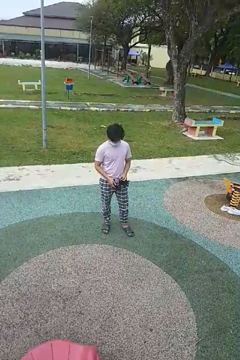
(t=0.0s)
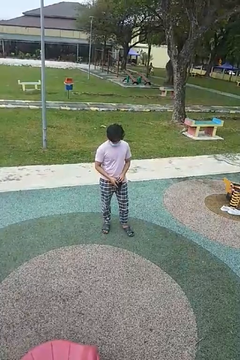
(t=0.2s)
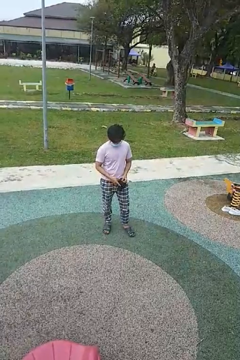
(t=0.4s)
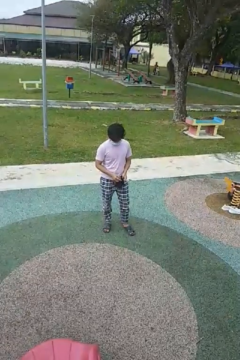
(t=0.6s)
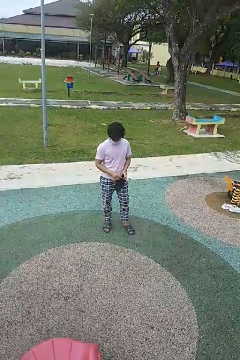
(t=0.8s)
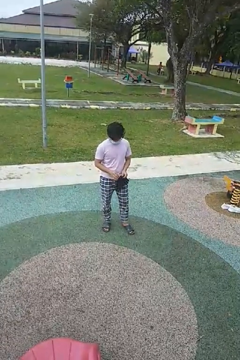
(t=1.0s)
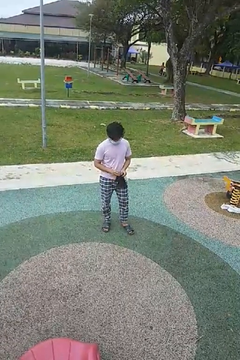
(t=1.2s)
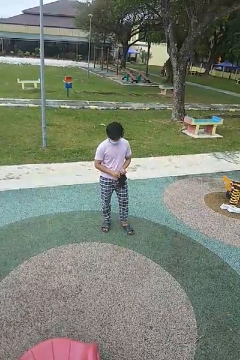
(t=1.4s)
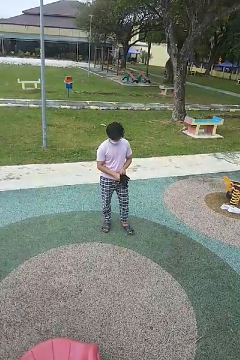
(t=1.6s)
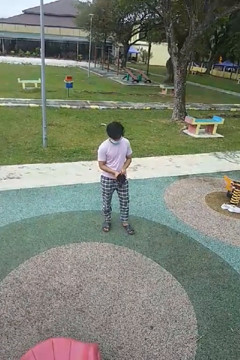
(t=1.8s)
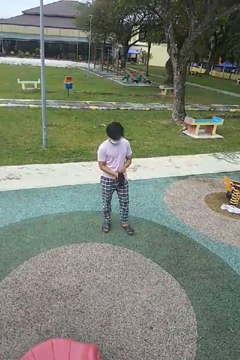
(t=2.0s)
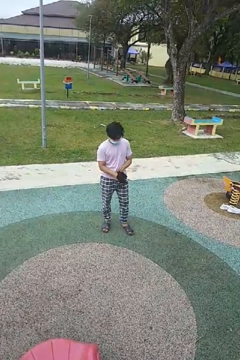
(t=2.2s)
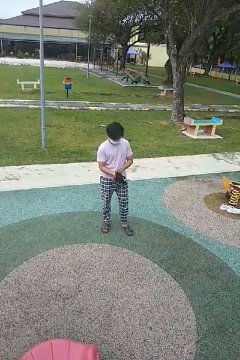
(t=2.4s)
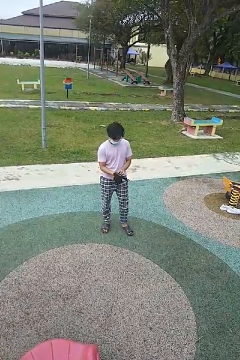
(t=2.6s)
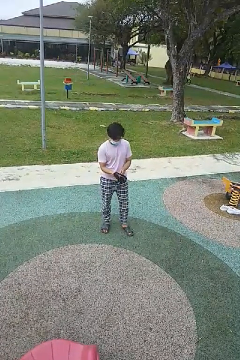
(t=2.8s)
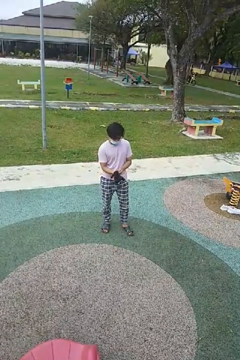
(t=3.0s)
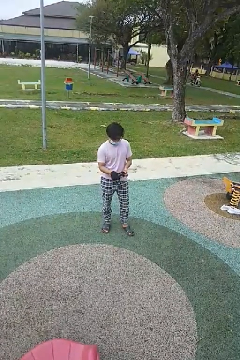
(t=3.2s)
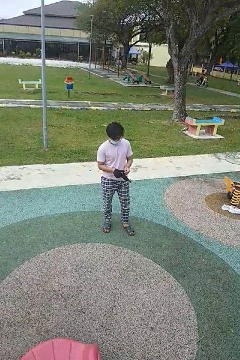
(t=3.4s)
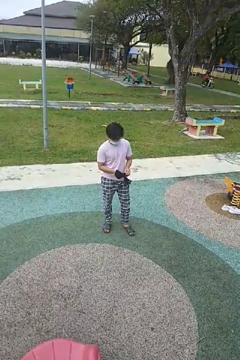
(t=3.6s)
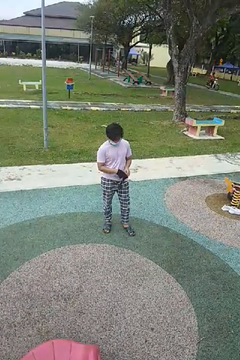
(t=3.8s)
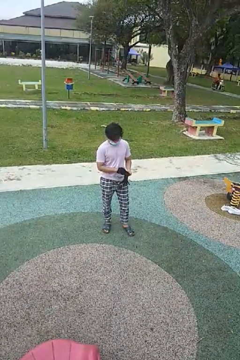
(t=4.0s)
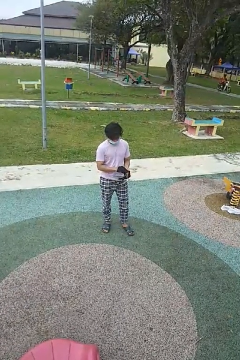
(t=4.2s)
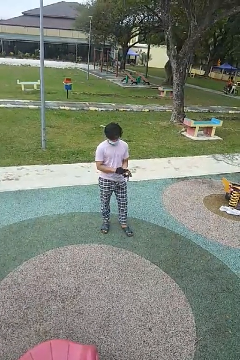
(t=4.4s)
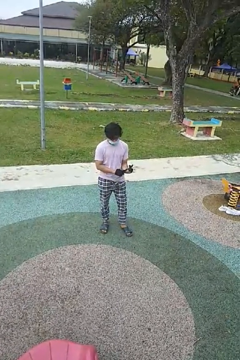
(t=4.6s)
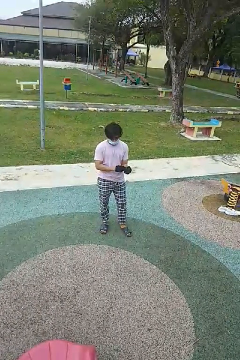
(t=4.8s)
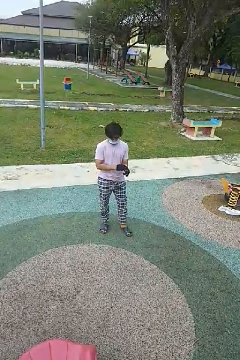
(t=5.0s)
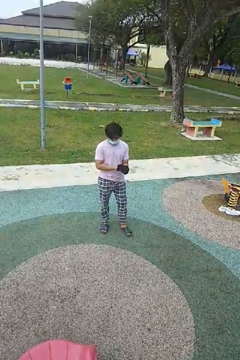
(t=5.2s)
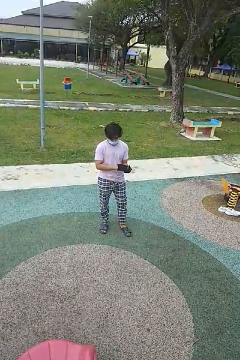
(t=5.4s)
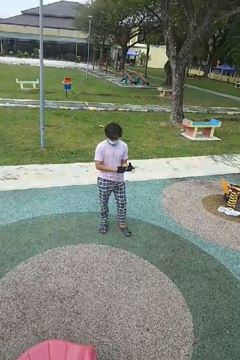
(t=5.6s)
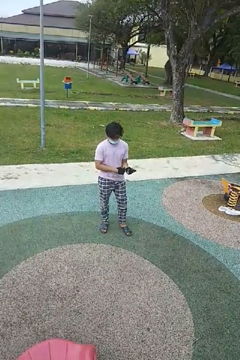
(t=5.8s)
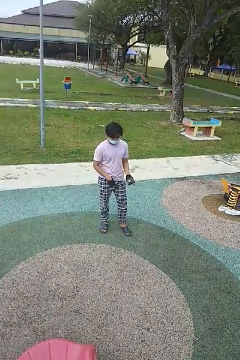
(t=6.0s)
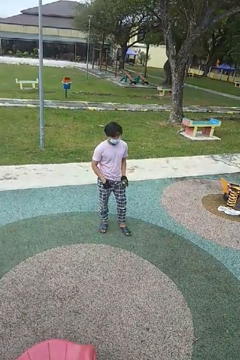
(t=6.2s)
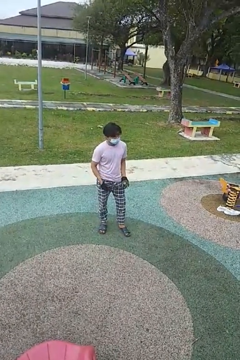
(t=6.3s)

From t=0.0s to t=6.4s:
person puts on gloves

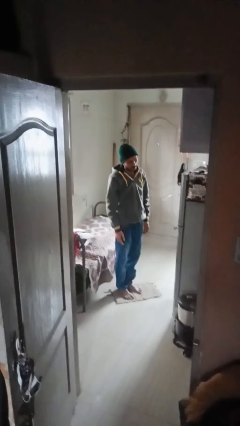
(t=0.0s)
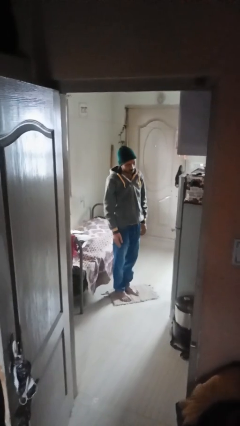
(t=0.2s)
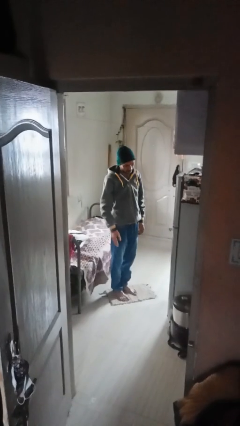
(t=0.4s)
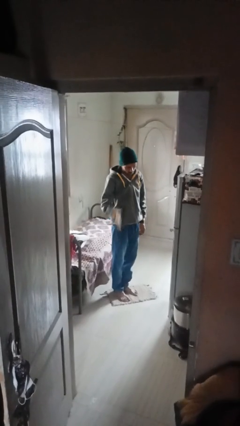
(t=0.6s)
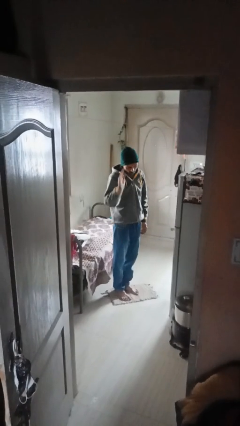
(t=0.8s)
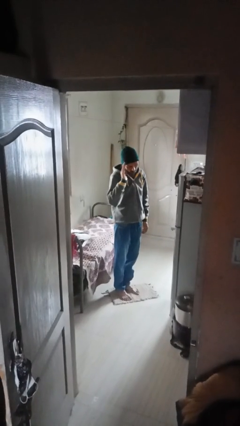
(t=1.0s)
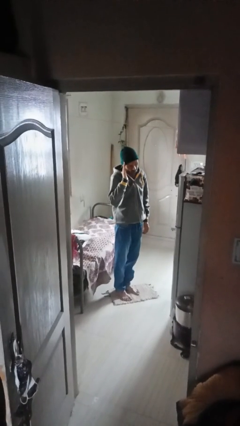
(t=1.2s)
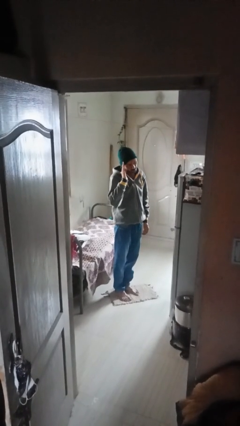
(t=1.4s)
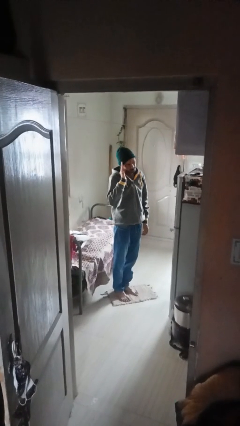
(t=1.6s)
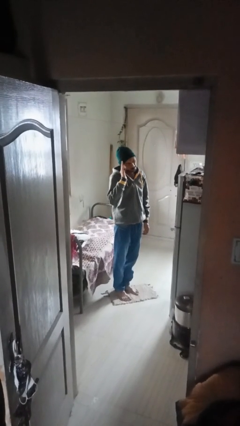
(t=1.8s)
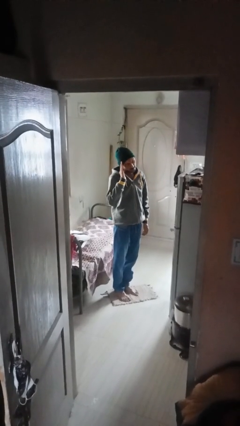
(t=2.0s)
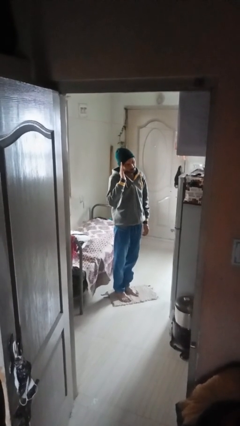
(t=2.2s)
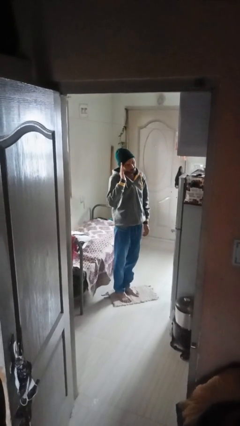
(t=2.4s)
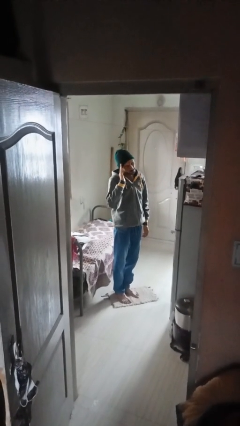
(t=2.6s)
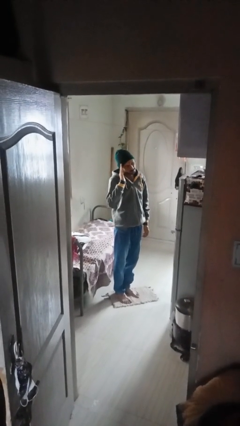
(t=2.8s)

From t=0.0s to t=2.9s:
person salutes

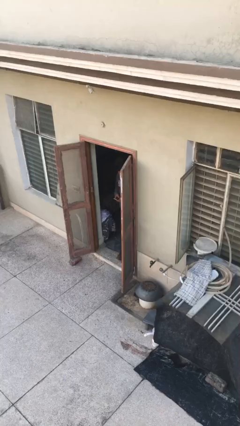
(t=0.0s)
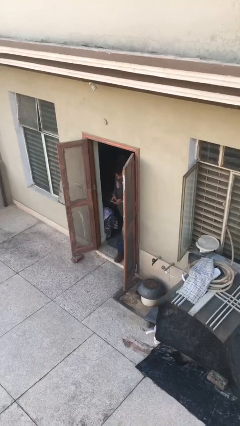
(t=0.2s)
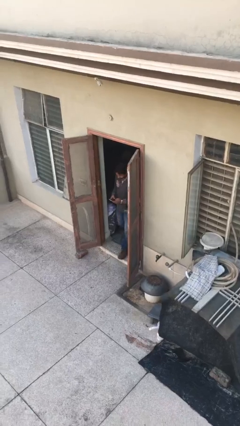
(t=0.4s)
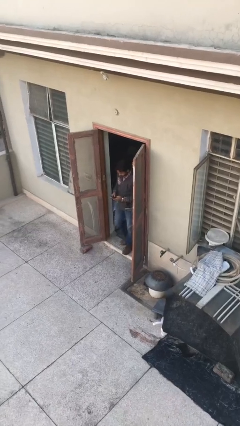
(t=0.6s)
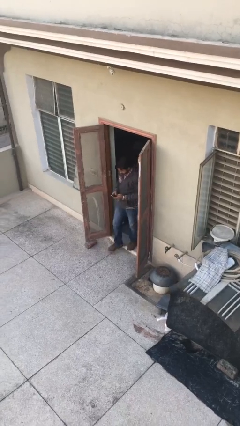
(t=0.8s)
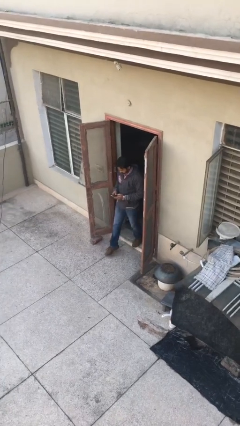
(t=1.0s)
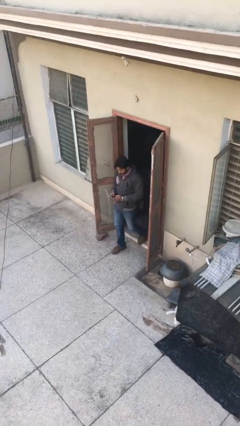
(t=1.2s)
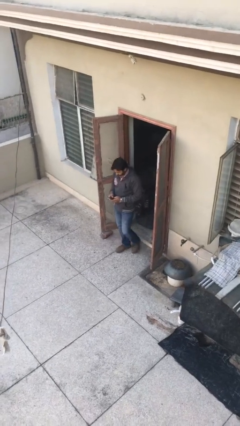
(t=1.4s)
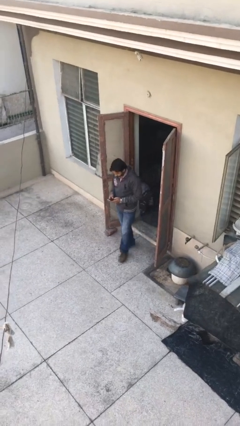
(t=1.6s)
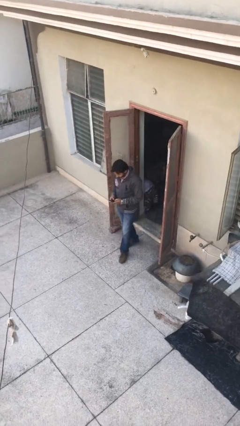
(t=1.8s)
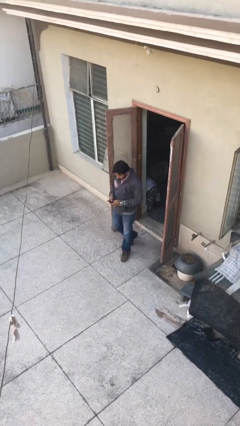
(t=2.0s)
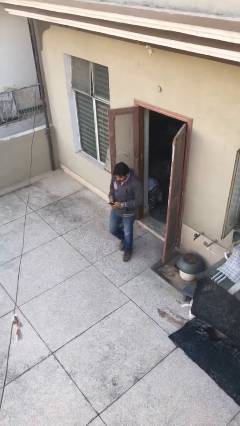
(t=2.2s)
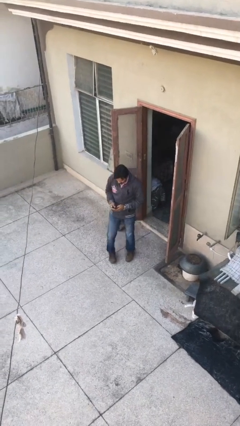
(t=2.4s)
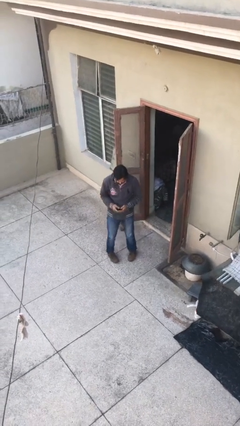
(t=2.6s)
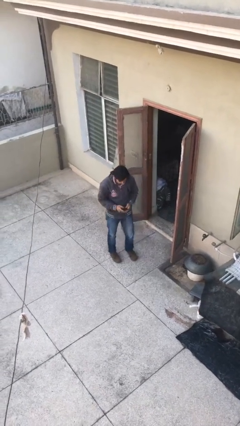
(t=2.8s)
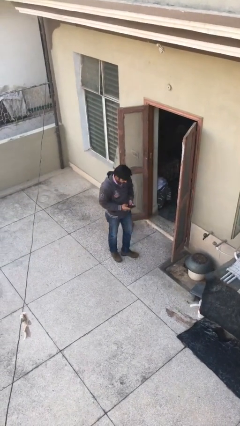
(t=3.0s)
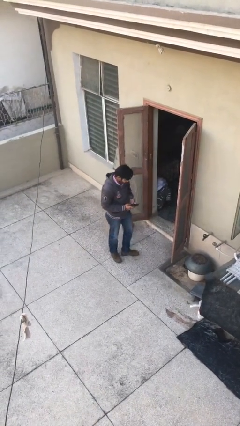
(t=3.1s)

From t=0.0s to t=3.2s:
person enters scene through structure

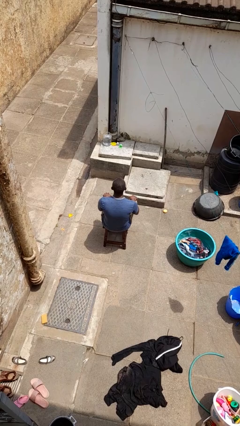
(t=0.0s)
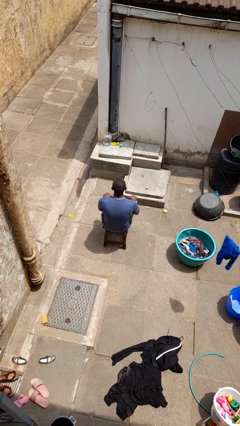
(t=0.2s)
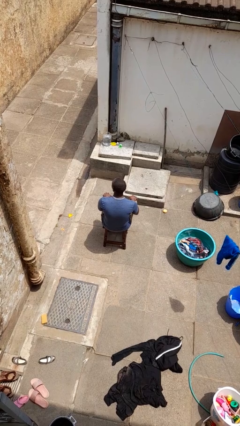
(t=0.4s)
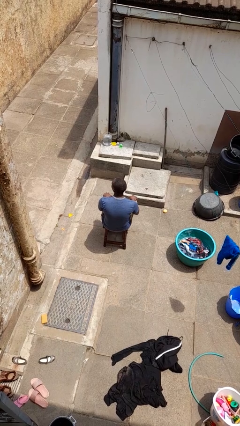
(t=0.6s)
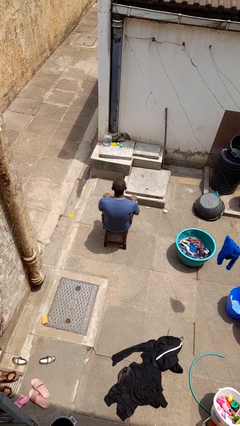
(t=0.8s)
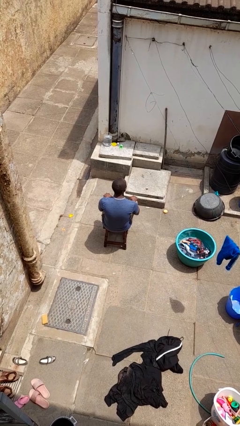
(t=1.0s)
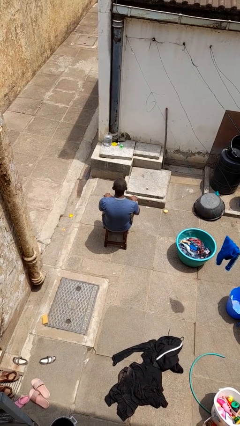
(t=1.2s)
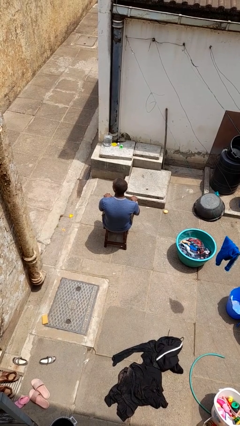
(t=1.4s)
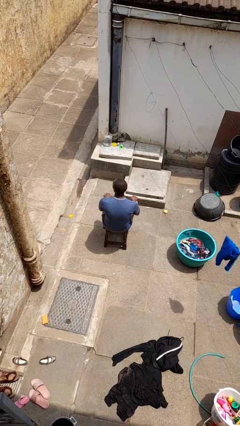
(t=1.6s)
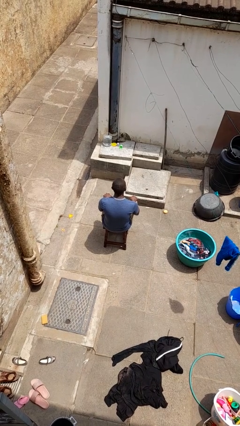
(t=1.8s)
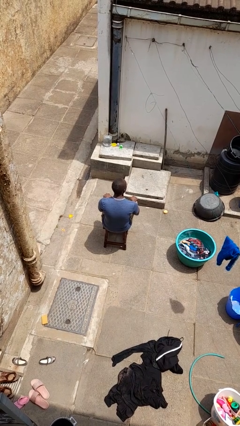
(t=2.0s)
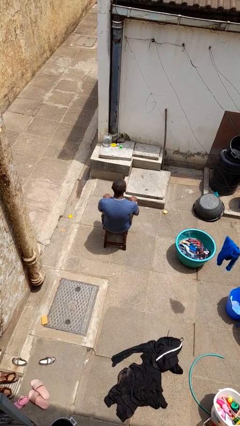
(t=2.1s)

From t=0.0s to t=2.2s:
person shakes head

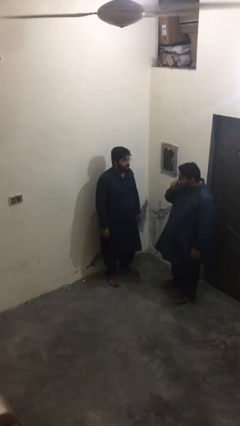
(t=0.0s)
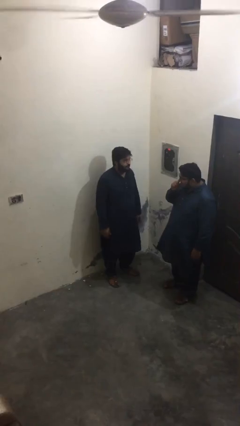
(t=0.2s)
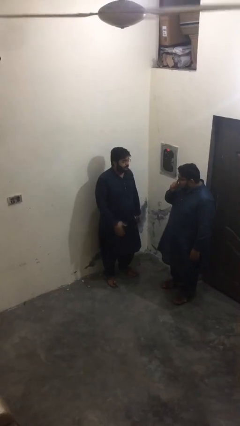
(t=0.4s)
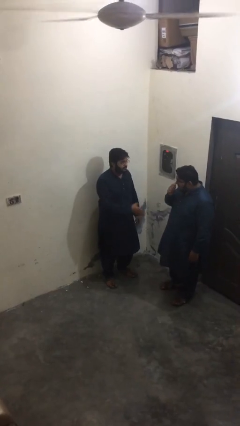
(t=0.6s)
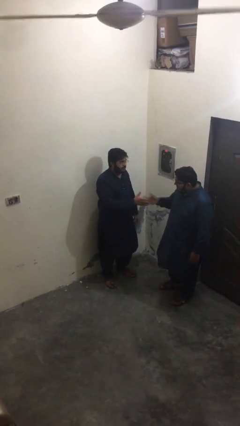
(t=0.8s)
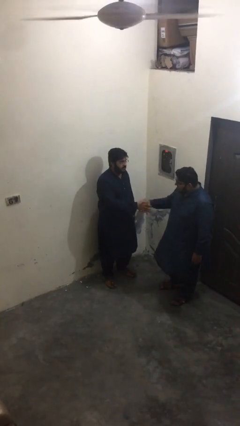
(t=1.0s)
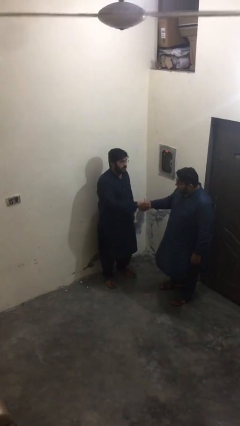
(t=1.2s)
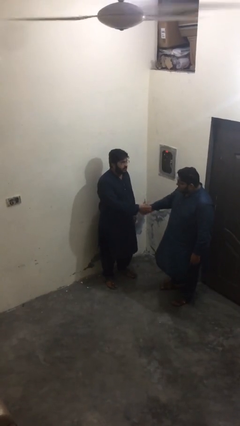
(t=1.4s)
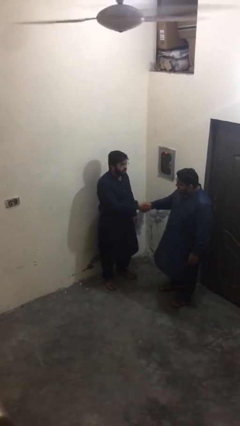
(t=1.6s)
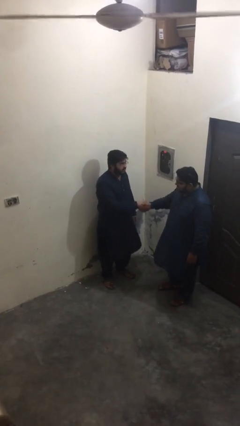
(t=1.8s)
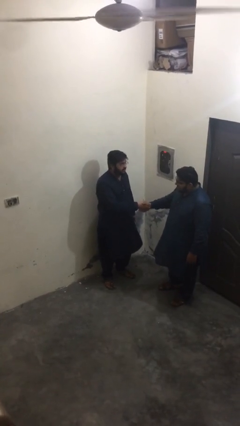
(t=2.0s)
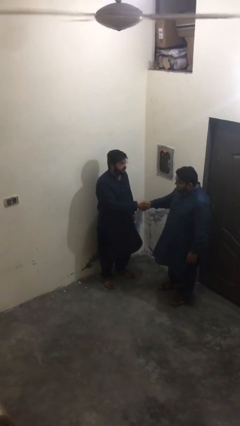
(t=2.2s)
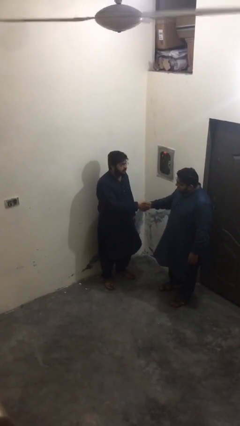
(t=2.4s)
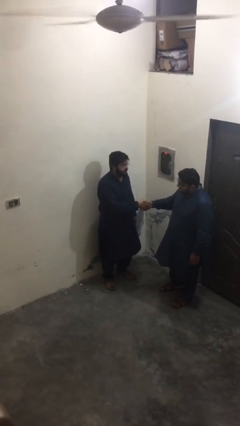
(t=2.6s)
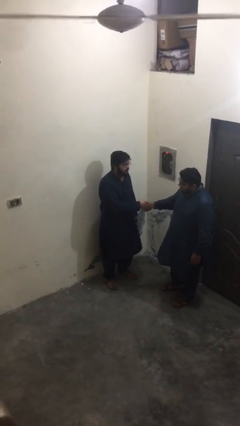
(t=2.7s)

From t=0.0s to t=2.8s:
person shakes hand

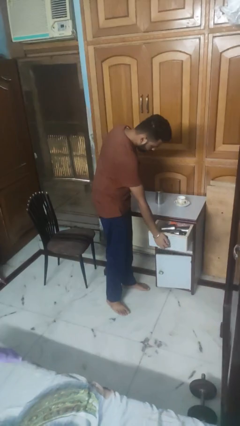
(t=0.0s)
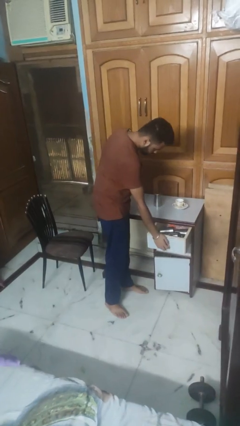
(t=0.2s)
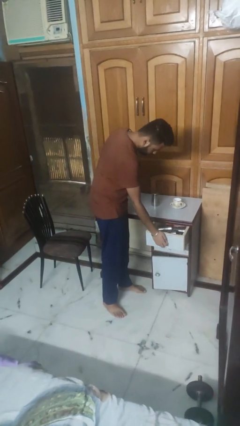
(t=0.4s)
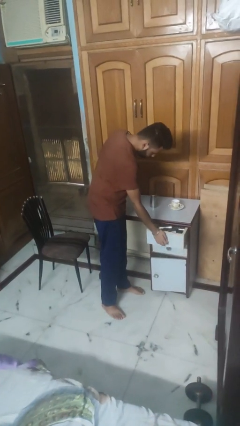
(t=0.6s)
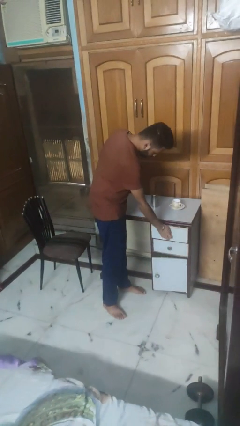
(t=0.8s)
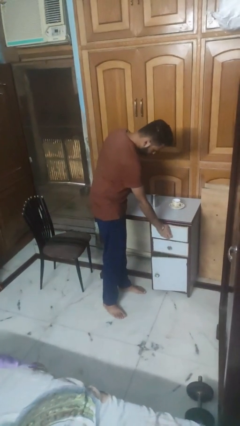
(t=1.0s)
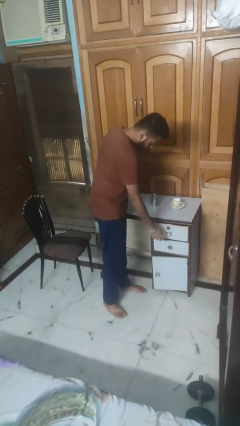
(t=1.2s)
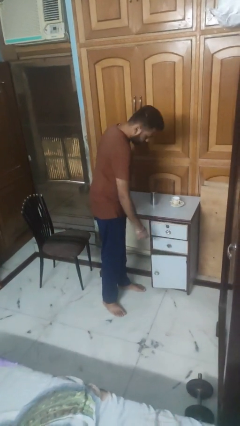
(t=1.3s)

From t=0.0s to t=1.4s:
person closes kitchen drawer
